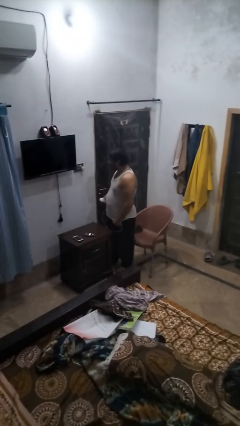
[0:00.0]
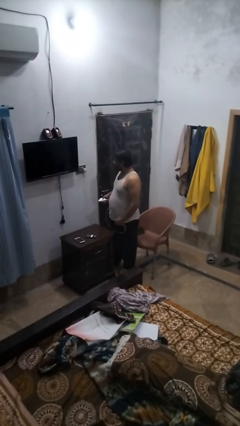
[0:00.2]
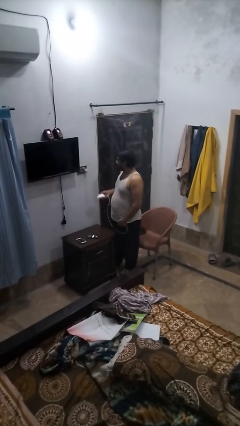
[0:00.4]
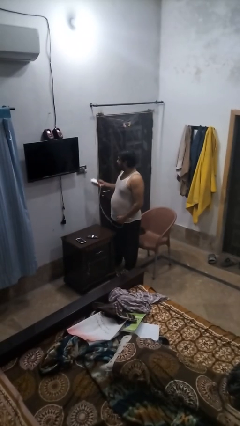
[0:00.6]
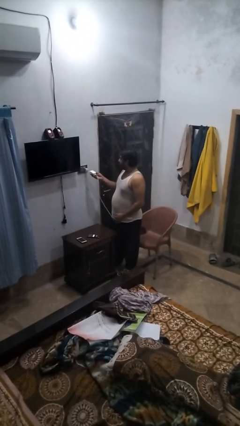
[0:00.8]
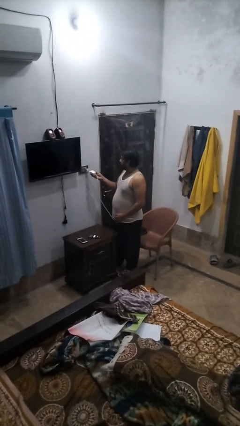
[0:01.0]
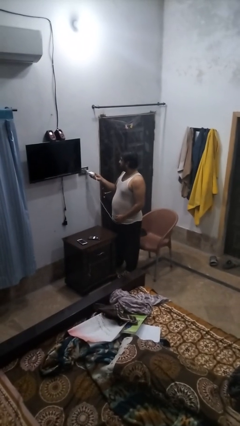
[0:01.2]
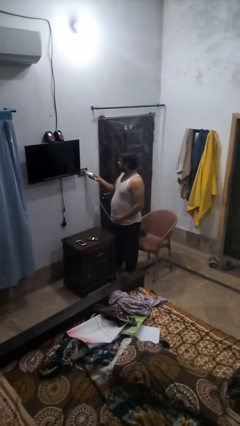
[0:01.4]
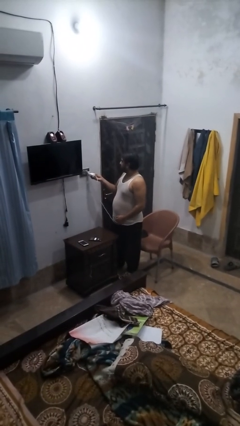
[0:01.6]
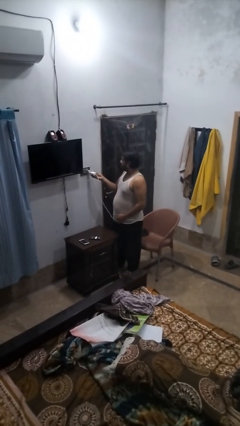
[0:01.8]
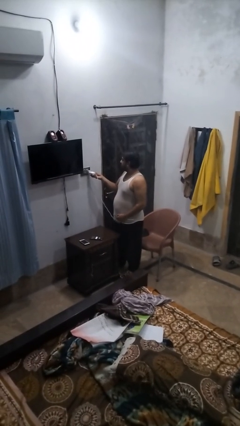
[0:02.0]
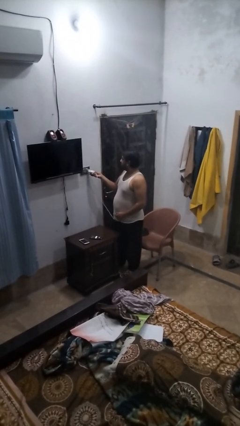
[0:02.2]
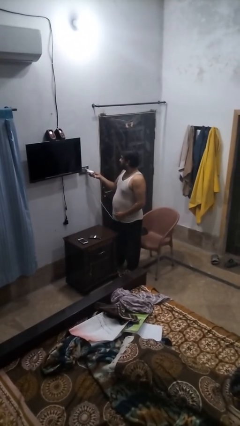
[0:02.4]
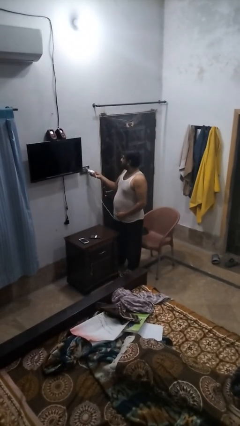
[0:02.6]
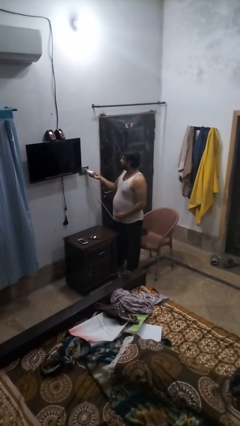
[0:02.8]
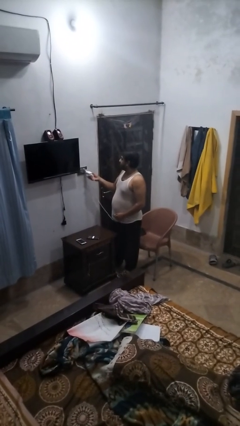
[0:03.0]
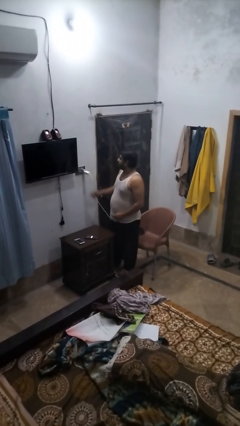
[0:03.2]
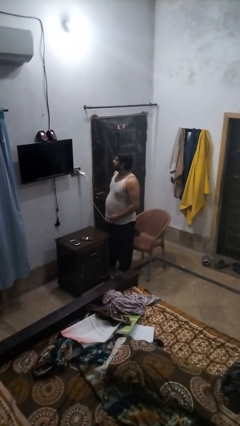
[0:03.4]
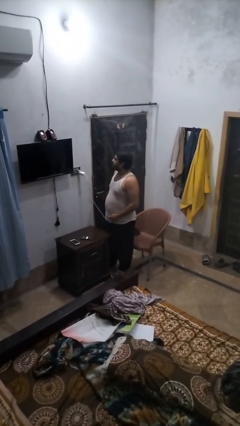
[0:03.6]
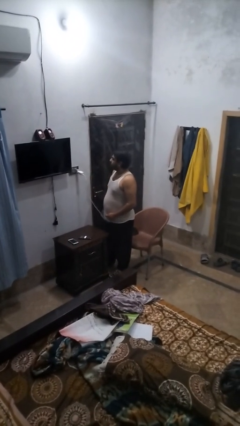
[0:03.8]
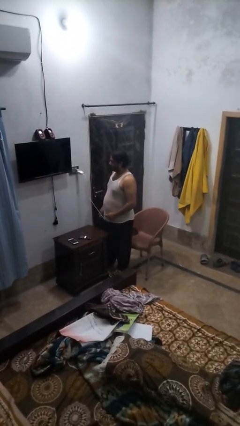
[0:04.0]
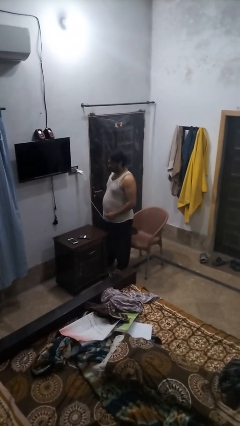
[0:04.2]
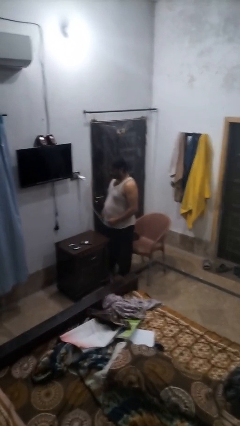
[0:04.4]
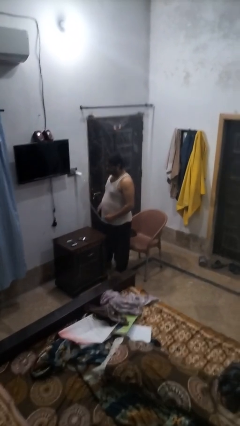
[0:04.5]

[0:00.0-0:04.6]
person plugs into electrical socket

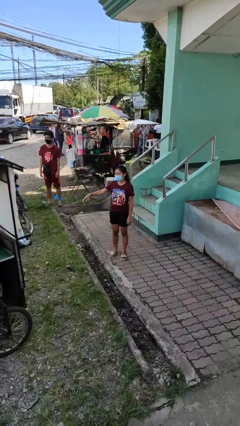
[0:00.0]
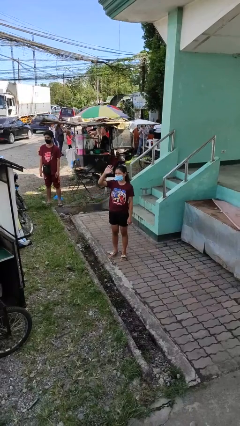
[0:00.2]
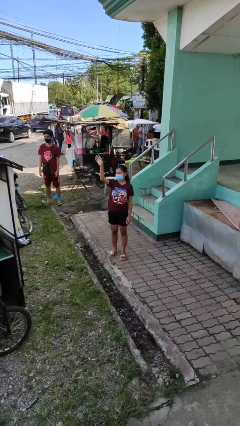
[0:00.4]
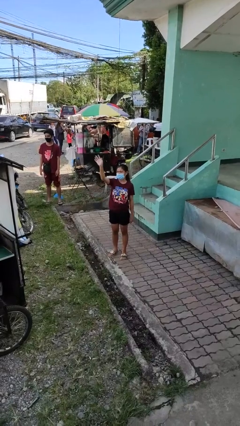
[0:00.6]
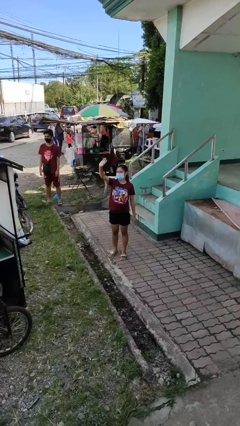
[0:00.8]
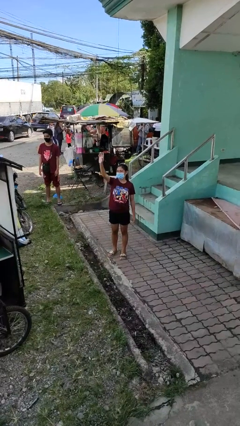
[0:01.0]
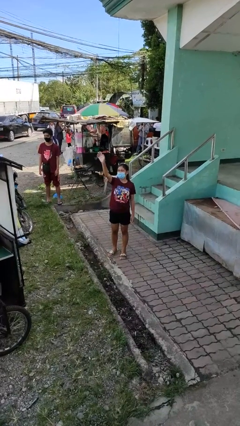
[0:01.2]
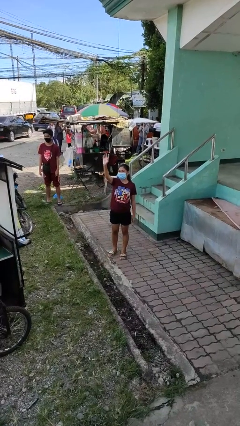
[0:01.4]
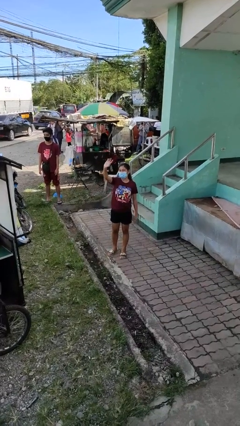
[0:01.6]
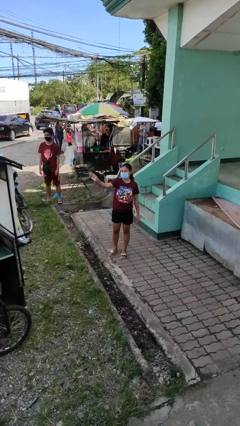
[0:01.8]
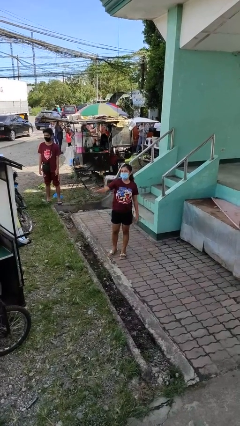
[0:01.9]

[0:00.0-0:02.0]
person waves at person

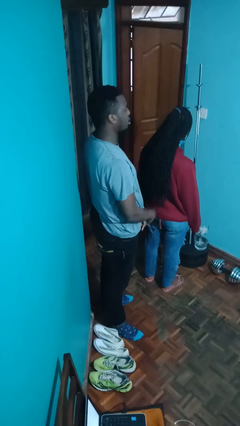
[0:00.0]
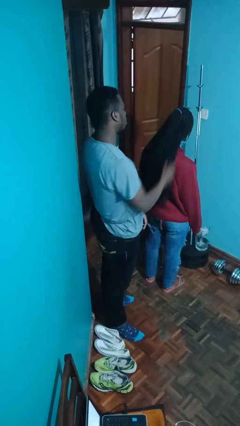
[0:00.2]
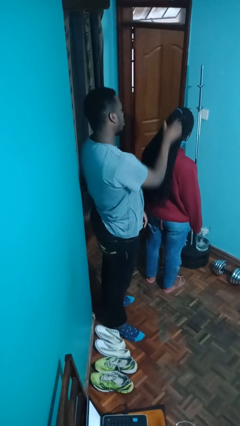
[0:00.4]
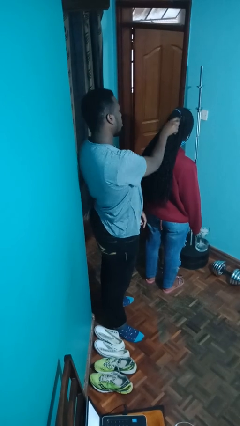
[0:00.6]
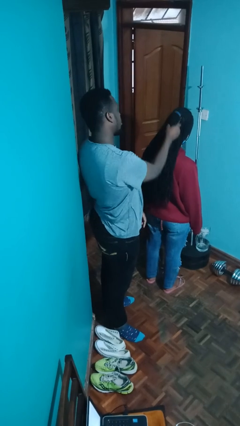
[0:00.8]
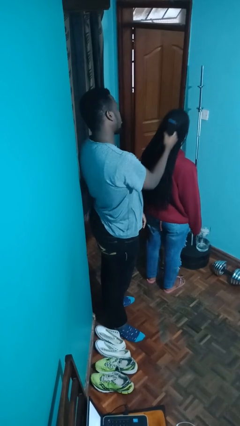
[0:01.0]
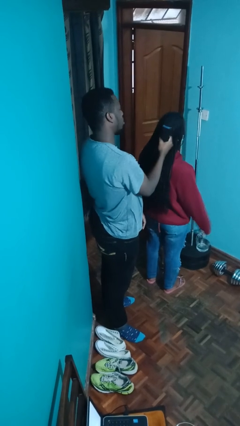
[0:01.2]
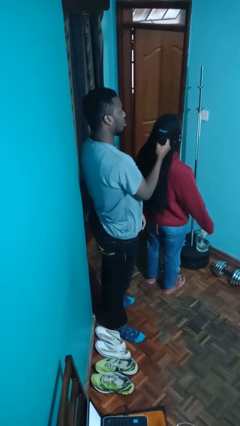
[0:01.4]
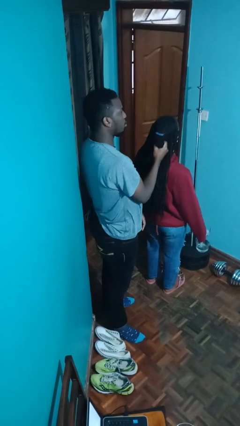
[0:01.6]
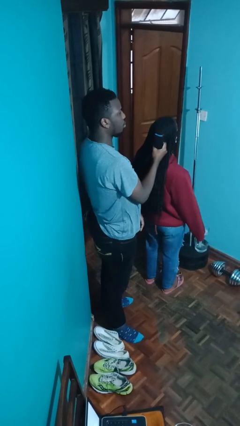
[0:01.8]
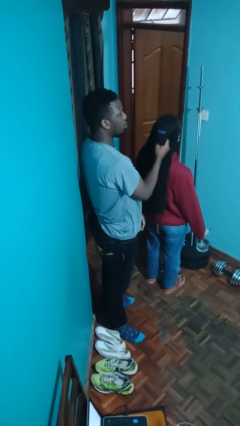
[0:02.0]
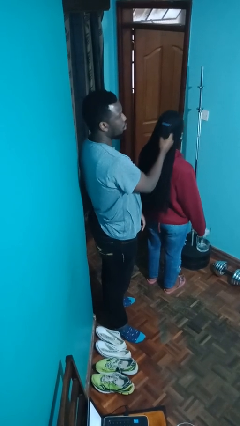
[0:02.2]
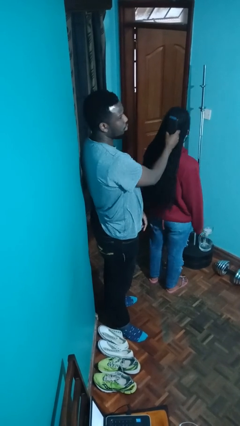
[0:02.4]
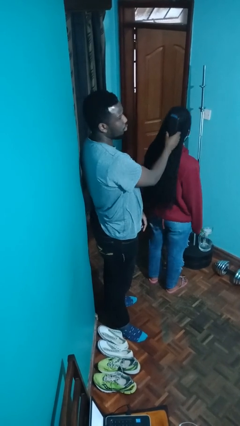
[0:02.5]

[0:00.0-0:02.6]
person grabs person by hair

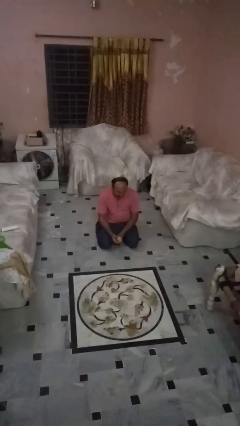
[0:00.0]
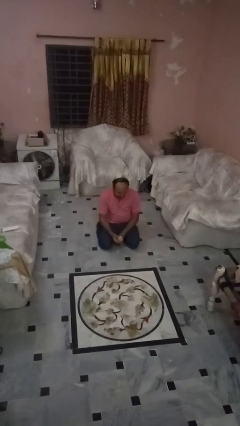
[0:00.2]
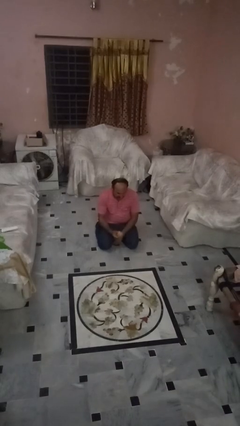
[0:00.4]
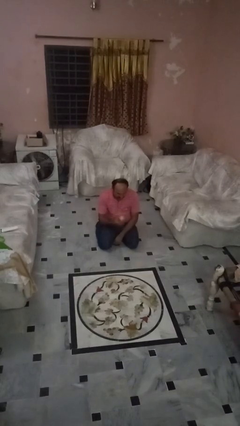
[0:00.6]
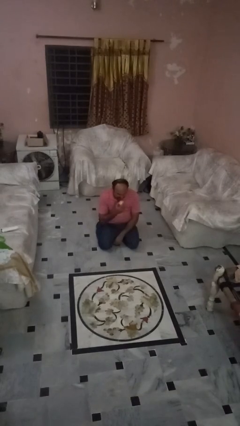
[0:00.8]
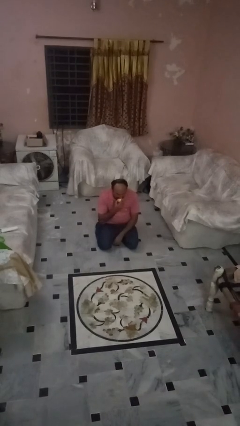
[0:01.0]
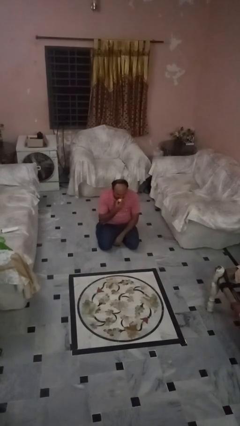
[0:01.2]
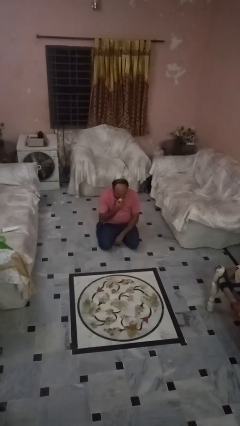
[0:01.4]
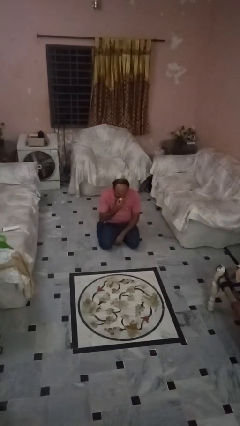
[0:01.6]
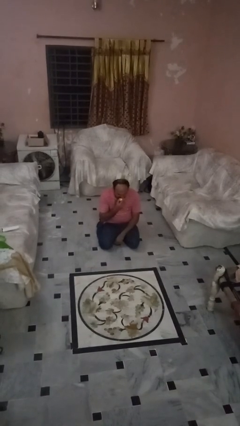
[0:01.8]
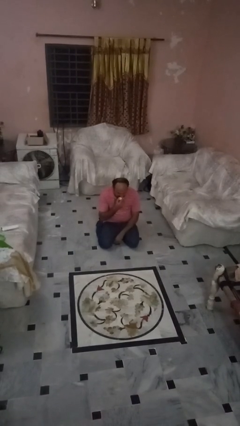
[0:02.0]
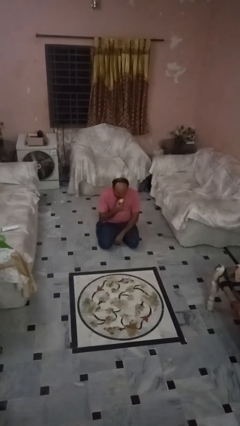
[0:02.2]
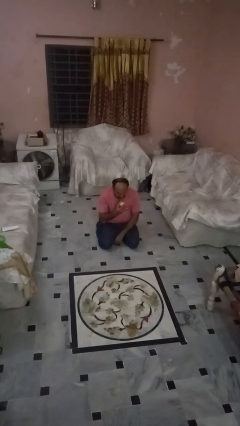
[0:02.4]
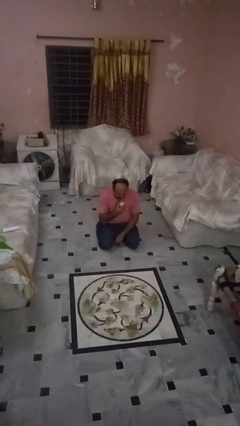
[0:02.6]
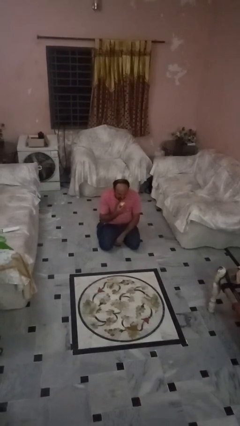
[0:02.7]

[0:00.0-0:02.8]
person eats apple

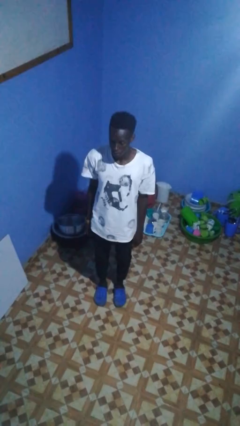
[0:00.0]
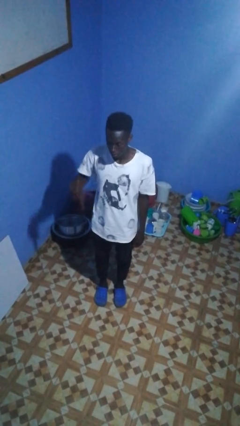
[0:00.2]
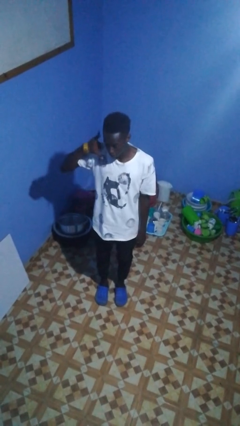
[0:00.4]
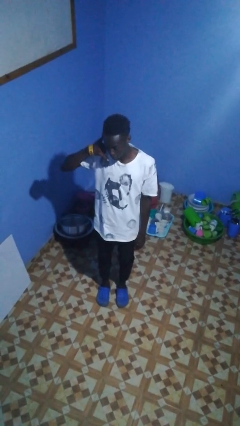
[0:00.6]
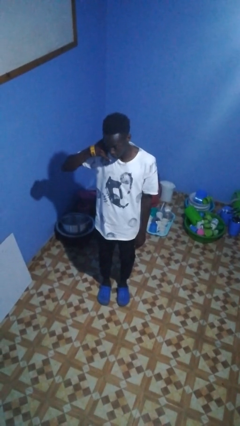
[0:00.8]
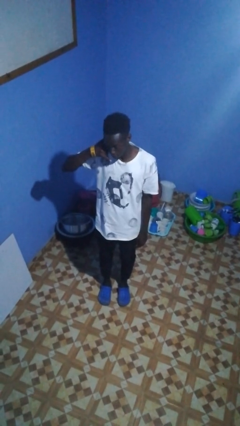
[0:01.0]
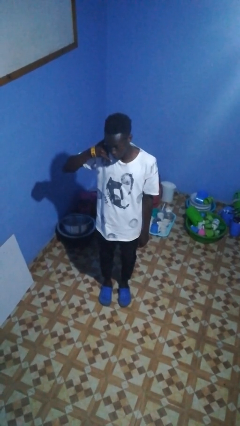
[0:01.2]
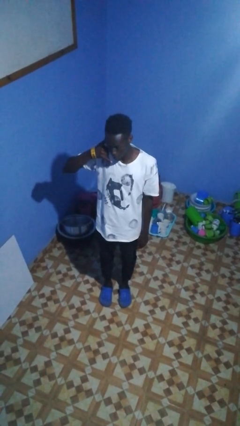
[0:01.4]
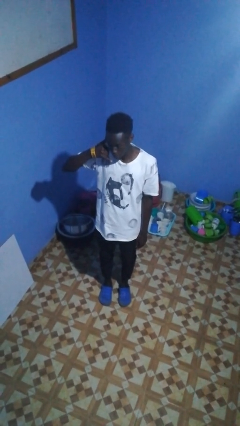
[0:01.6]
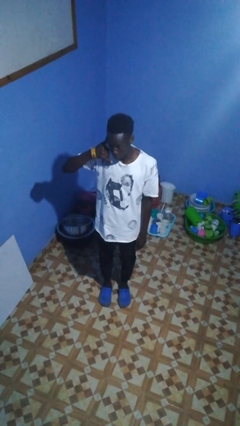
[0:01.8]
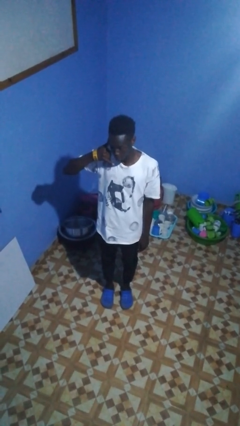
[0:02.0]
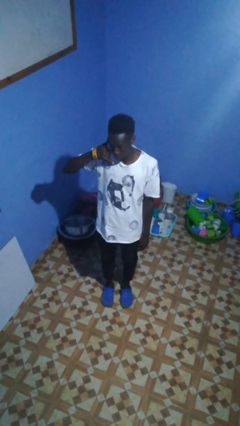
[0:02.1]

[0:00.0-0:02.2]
person gestures call me

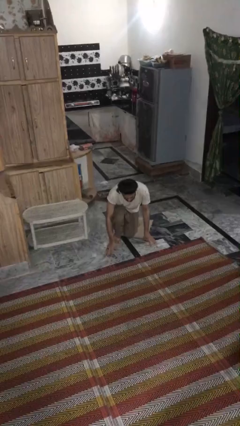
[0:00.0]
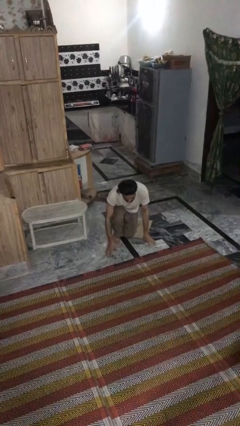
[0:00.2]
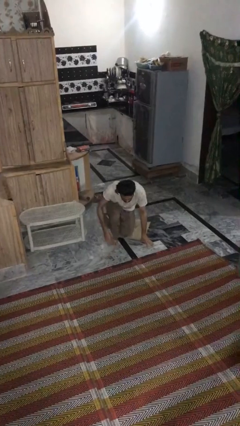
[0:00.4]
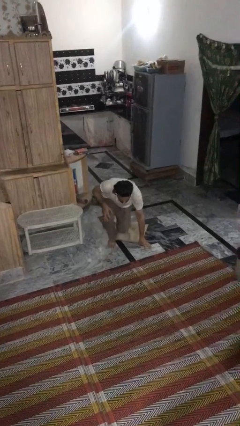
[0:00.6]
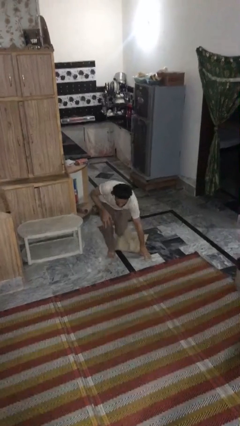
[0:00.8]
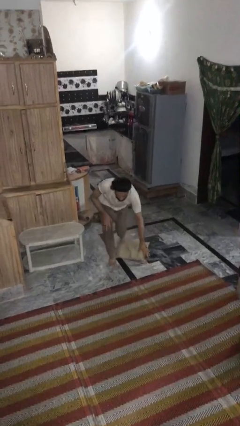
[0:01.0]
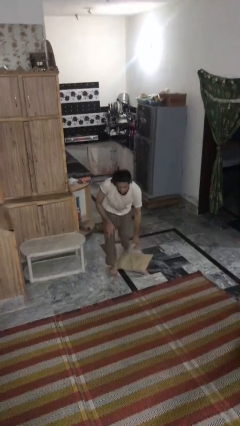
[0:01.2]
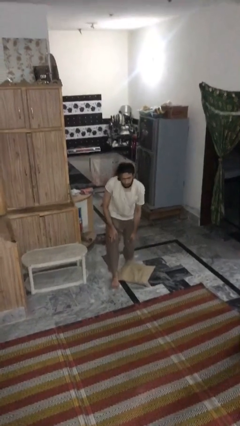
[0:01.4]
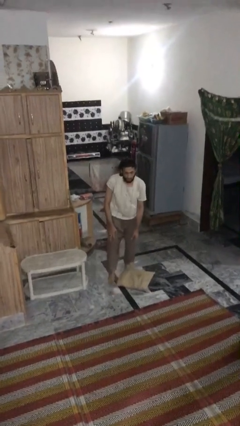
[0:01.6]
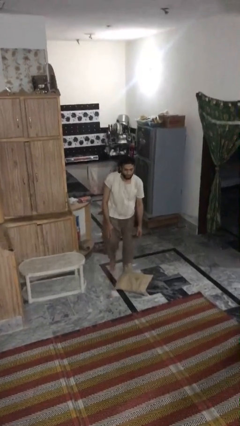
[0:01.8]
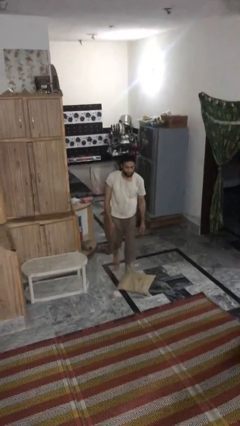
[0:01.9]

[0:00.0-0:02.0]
person stands up from floor

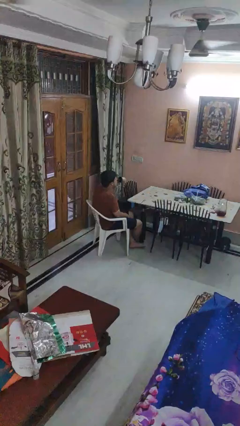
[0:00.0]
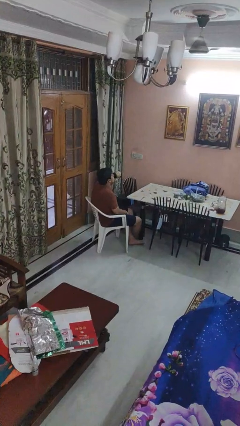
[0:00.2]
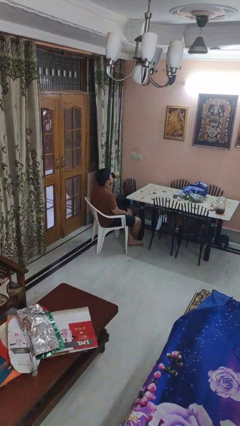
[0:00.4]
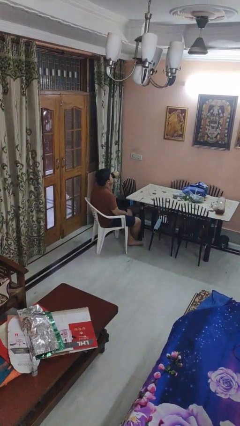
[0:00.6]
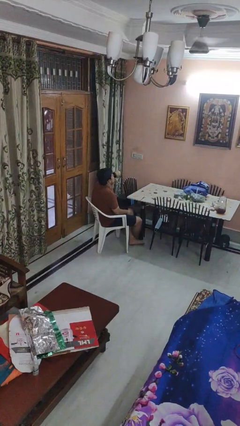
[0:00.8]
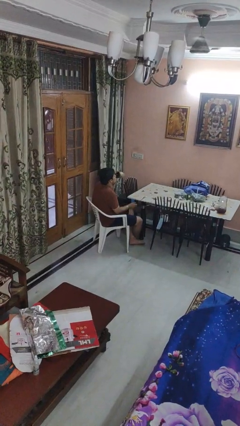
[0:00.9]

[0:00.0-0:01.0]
person drinks from mug
